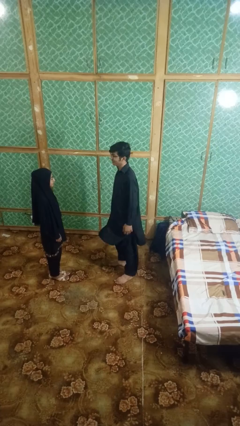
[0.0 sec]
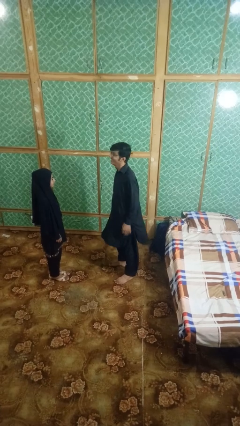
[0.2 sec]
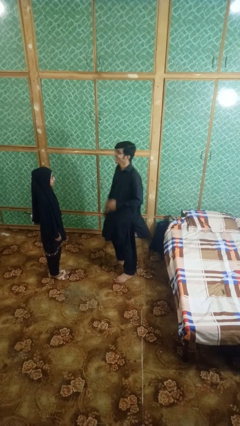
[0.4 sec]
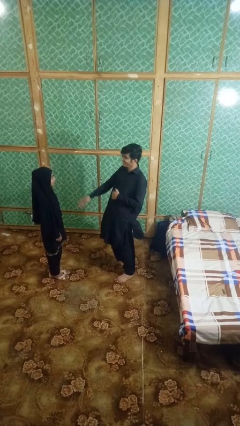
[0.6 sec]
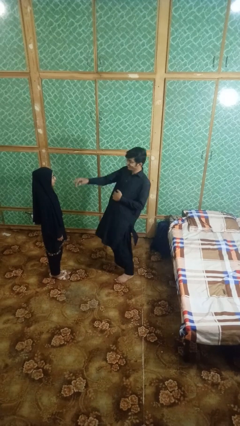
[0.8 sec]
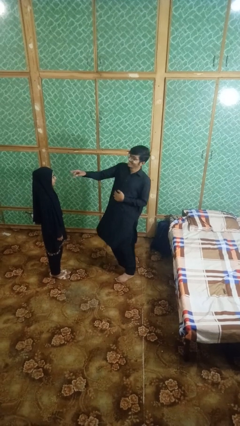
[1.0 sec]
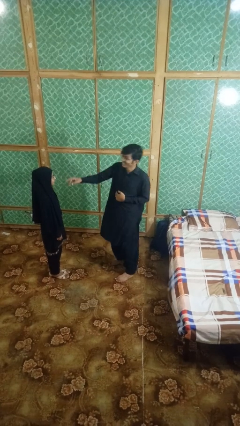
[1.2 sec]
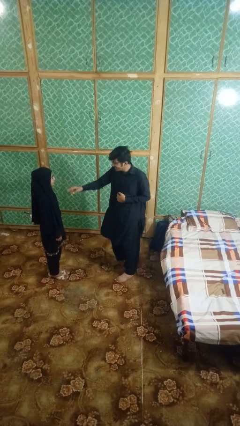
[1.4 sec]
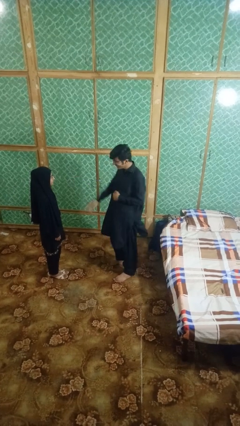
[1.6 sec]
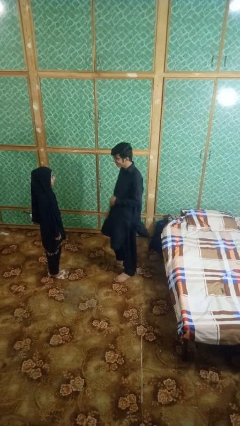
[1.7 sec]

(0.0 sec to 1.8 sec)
person laughs with person

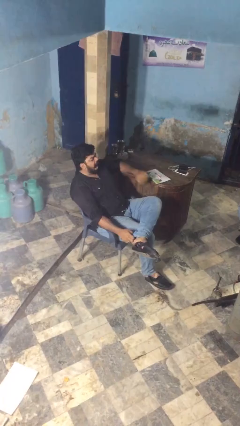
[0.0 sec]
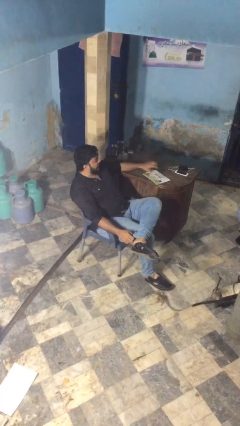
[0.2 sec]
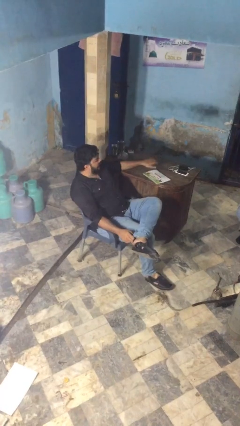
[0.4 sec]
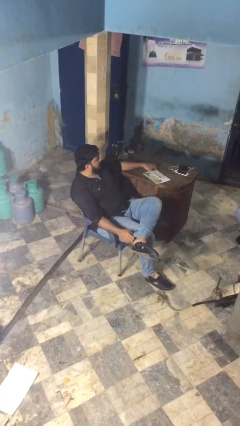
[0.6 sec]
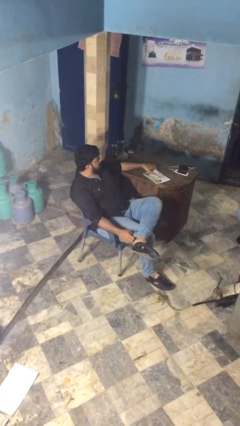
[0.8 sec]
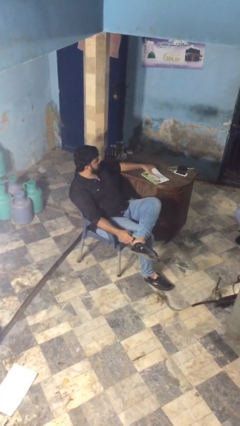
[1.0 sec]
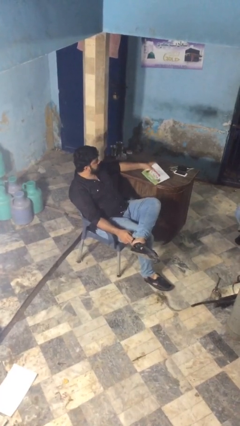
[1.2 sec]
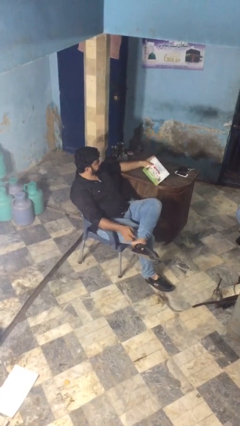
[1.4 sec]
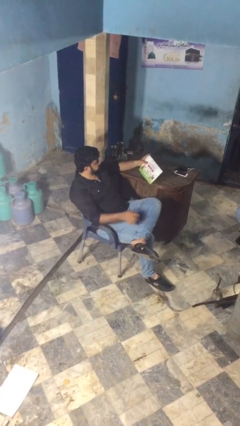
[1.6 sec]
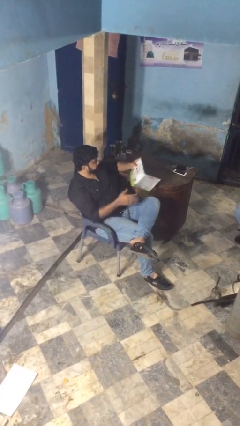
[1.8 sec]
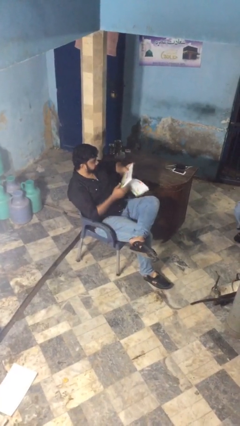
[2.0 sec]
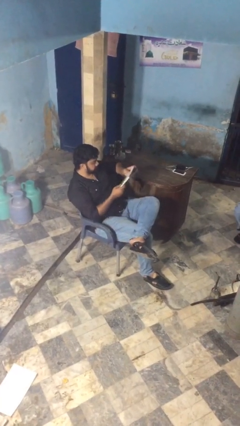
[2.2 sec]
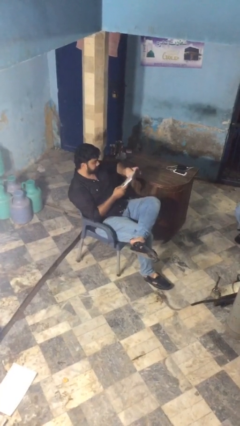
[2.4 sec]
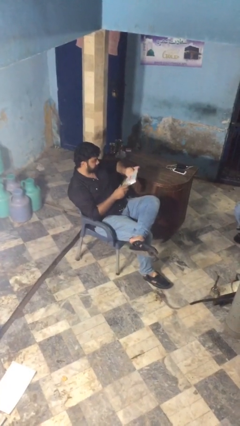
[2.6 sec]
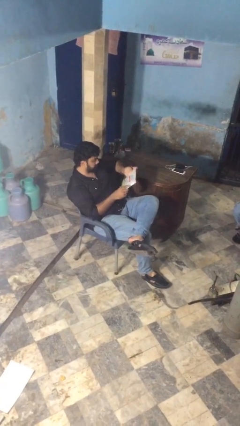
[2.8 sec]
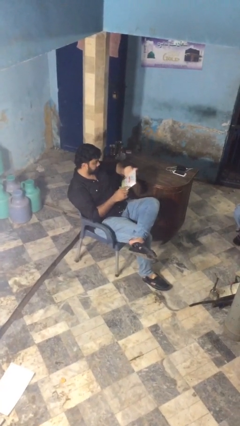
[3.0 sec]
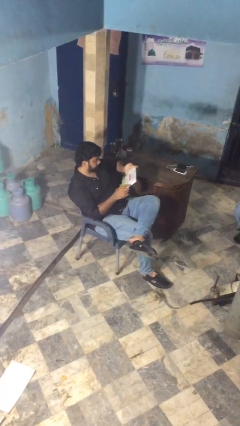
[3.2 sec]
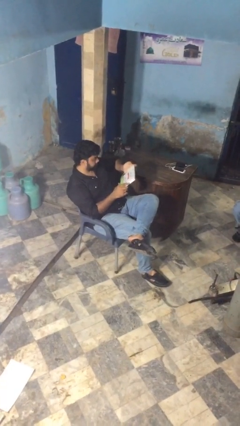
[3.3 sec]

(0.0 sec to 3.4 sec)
person picks up object from table

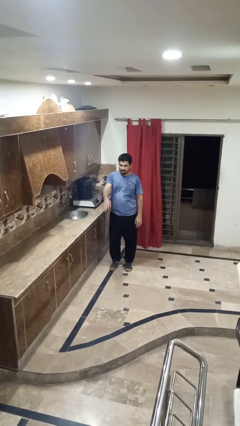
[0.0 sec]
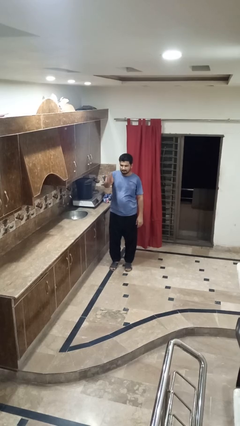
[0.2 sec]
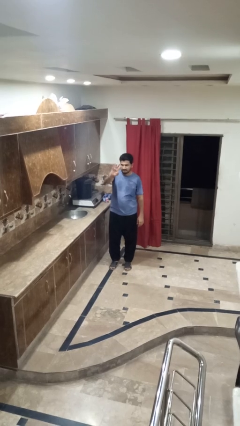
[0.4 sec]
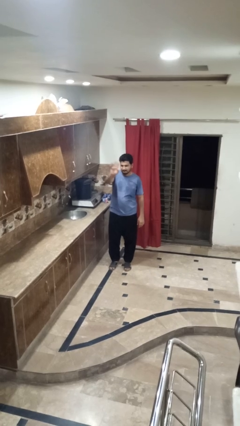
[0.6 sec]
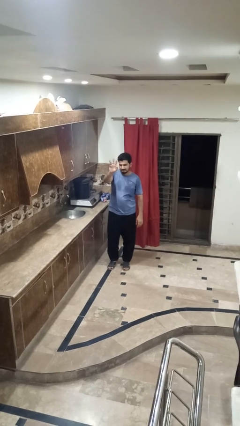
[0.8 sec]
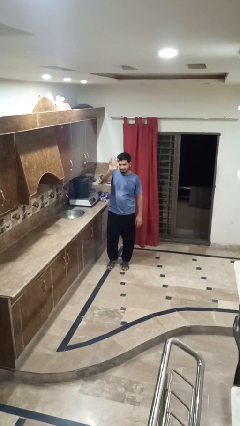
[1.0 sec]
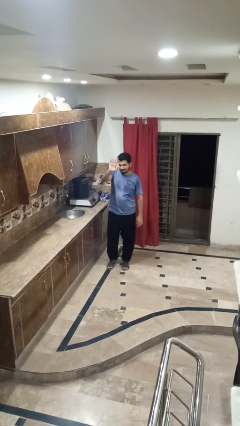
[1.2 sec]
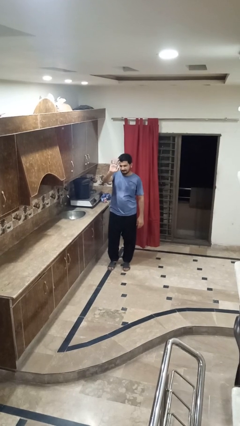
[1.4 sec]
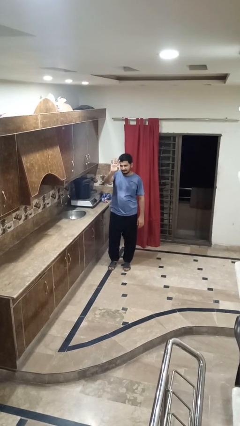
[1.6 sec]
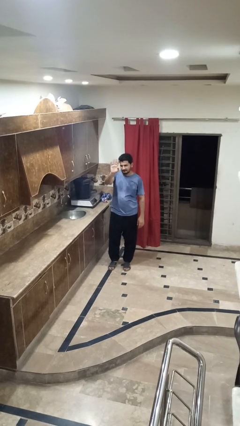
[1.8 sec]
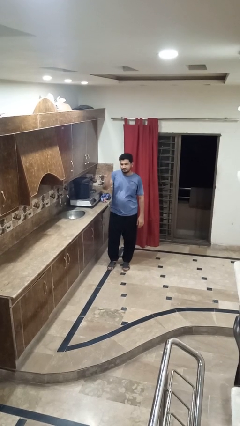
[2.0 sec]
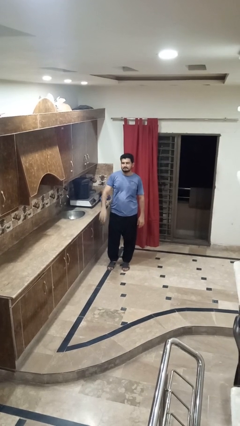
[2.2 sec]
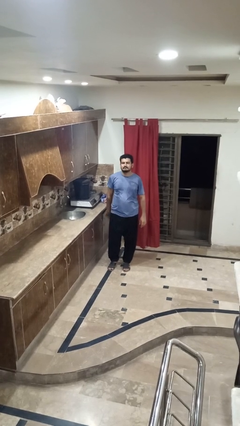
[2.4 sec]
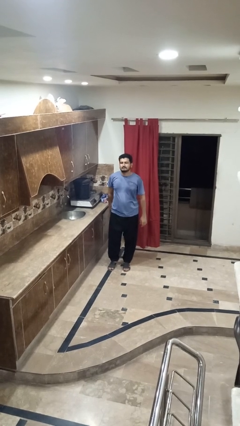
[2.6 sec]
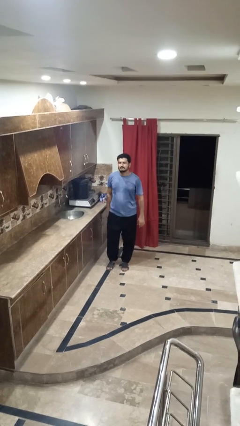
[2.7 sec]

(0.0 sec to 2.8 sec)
person waves at person

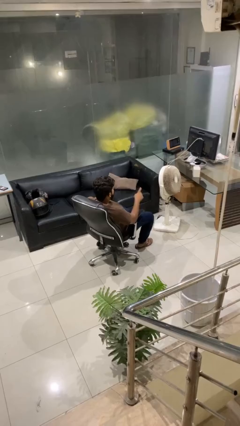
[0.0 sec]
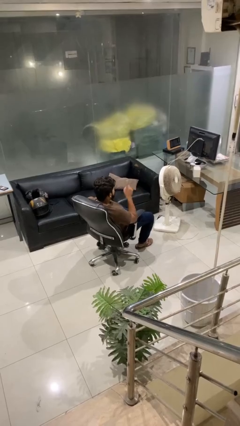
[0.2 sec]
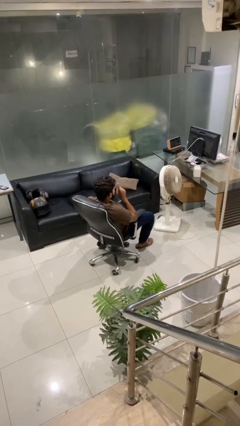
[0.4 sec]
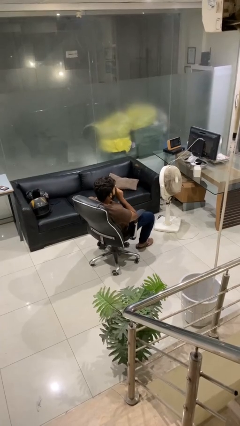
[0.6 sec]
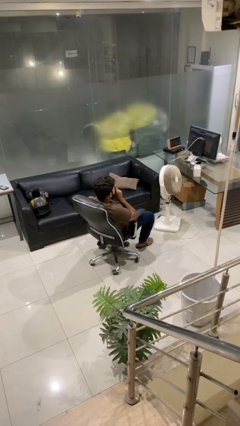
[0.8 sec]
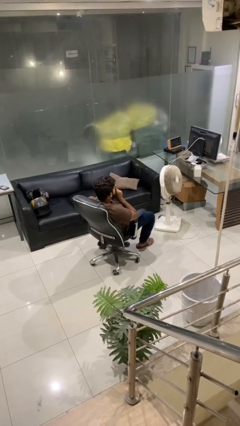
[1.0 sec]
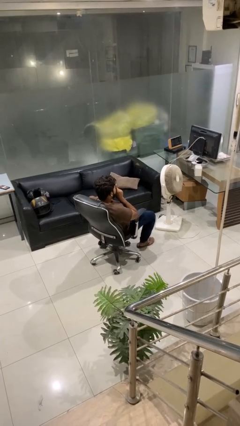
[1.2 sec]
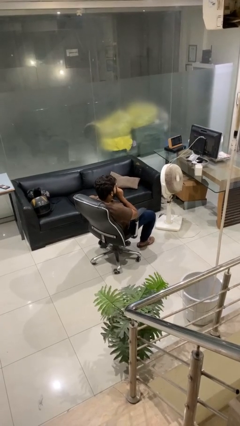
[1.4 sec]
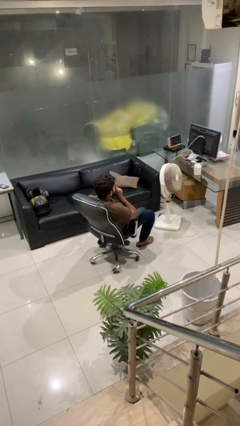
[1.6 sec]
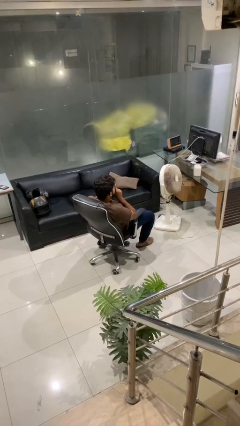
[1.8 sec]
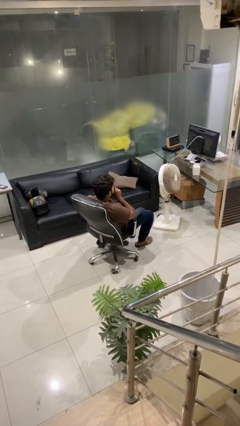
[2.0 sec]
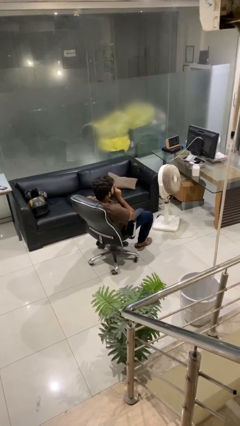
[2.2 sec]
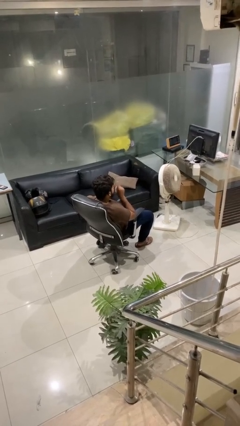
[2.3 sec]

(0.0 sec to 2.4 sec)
person gestures be quiet

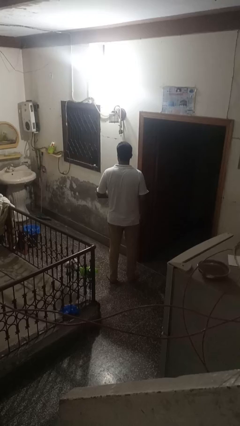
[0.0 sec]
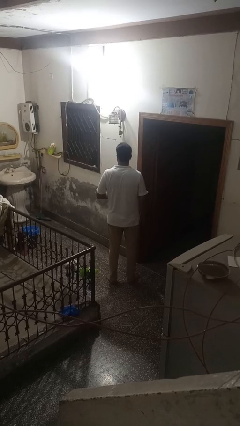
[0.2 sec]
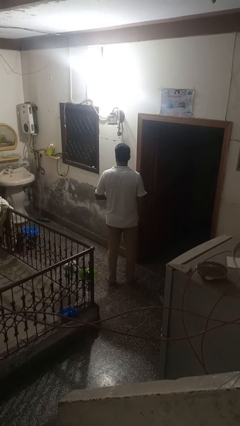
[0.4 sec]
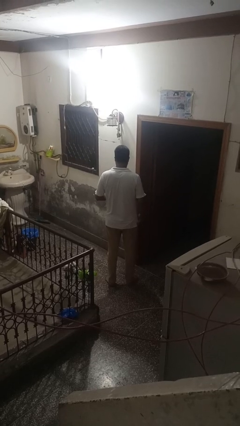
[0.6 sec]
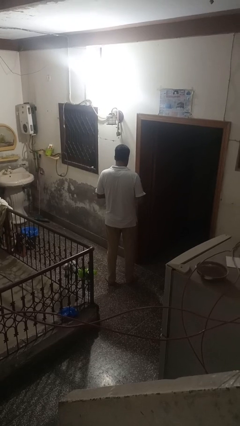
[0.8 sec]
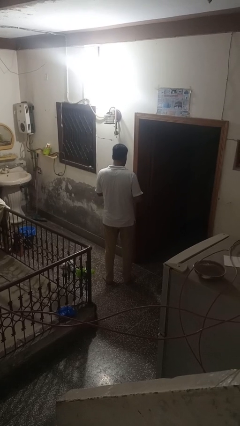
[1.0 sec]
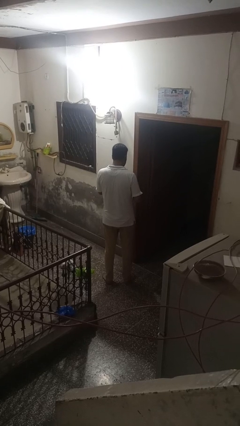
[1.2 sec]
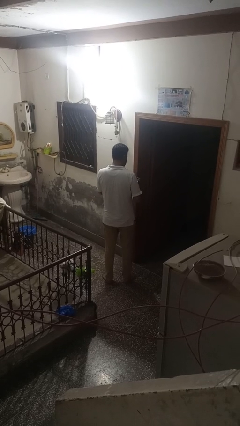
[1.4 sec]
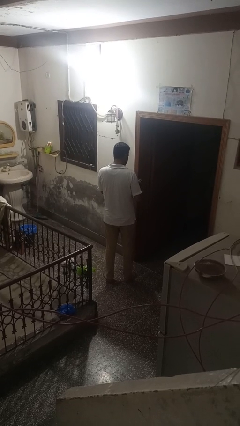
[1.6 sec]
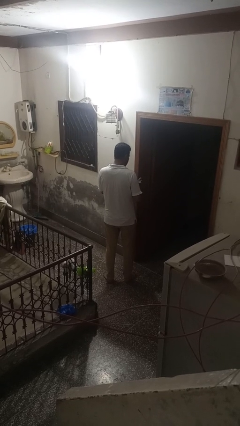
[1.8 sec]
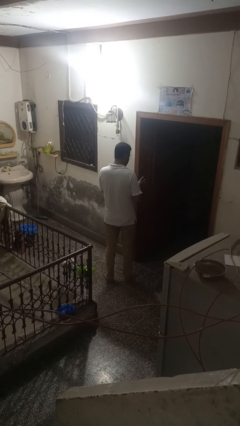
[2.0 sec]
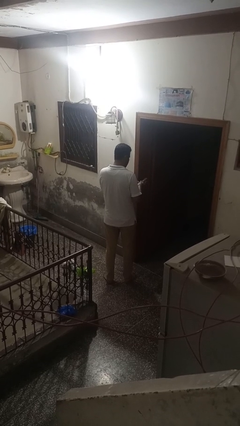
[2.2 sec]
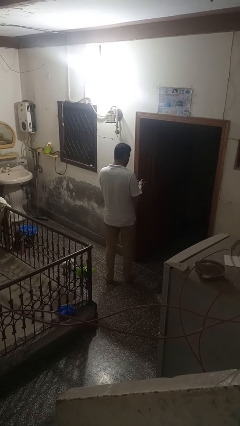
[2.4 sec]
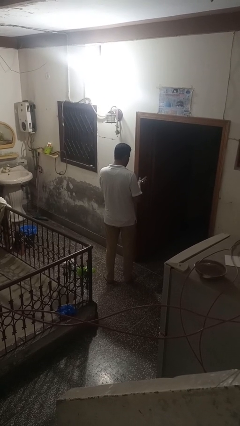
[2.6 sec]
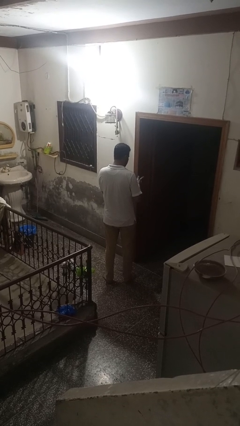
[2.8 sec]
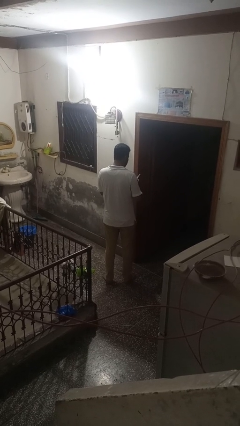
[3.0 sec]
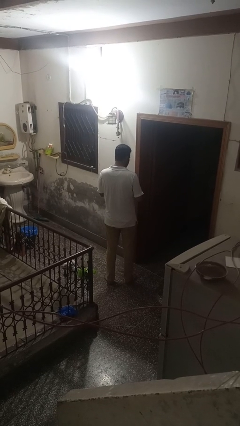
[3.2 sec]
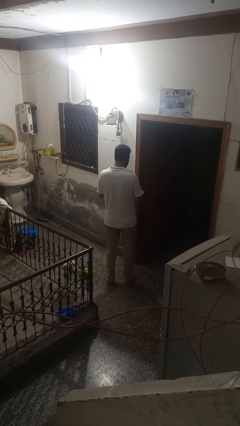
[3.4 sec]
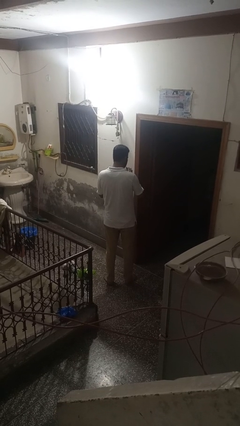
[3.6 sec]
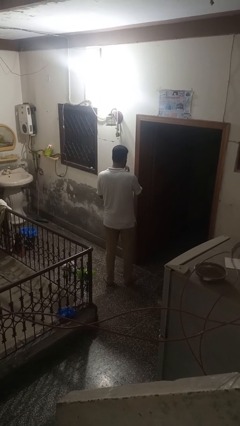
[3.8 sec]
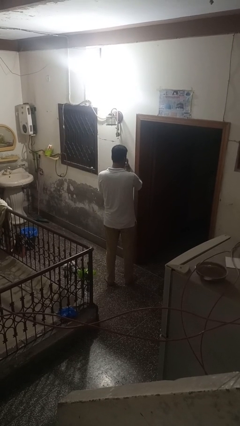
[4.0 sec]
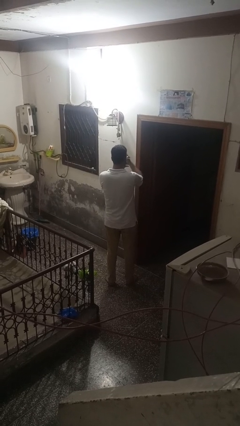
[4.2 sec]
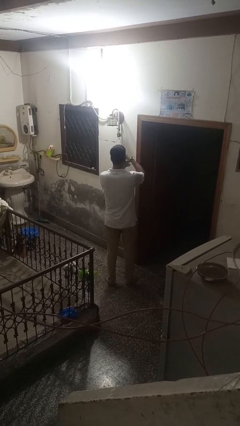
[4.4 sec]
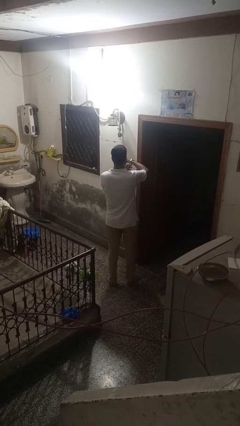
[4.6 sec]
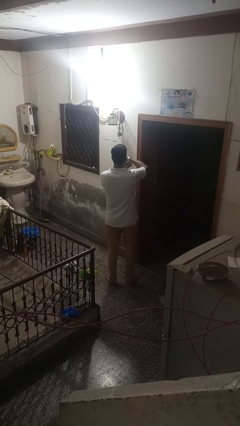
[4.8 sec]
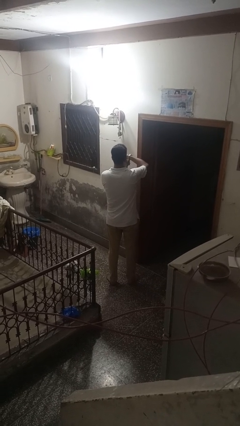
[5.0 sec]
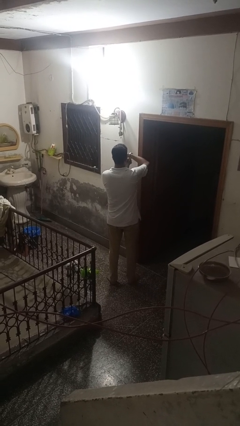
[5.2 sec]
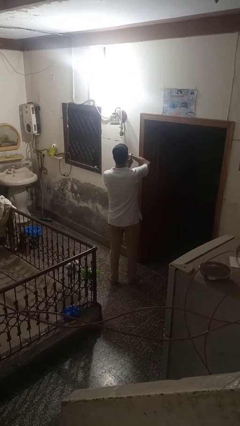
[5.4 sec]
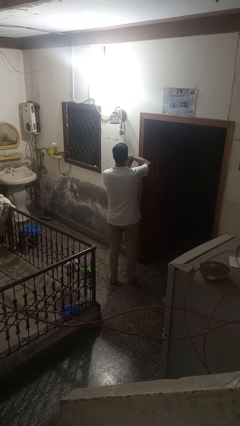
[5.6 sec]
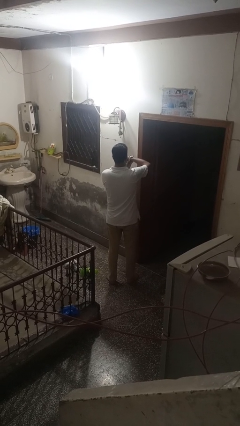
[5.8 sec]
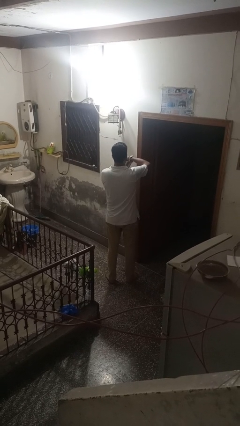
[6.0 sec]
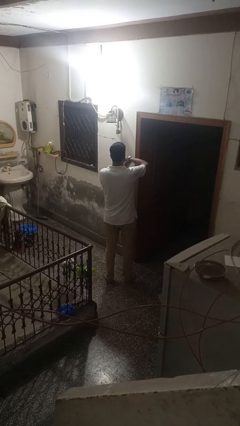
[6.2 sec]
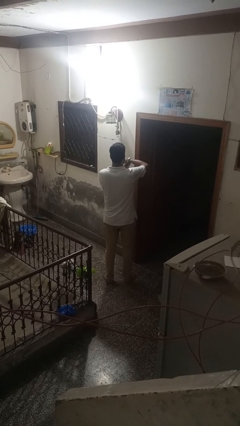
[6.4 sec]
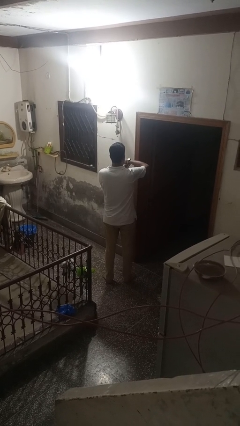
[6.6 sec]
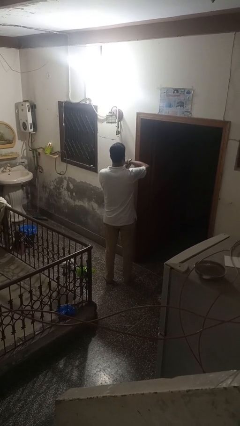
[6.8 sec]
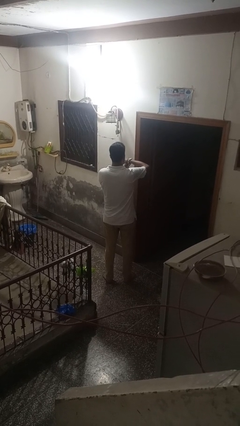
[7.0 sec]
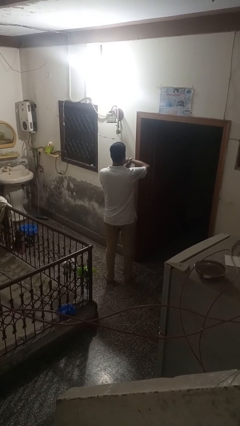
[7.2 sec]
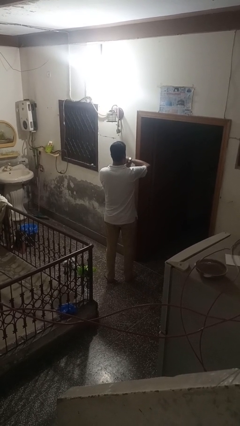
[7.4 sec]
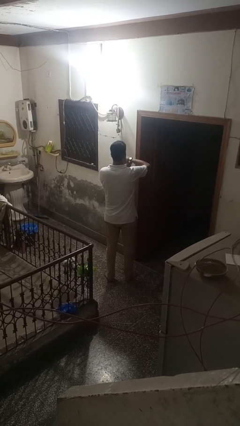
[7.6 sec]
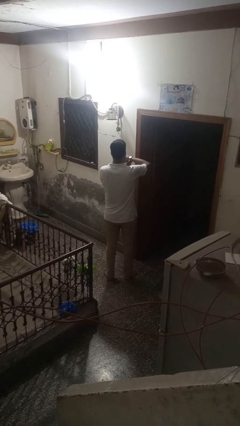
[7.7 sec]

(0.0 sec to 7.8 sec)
person puts on wristwatch
